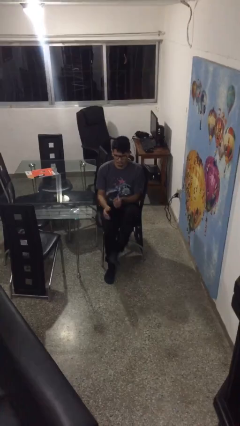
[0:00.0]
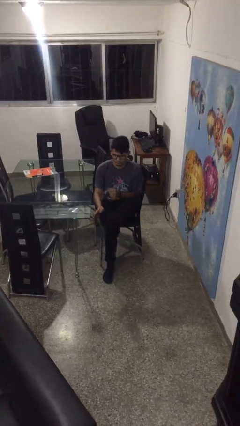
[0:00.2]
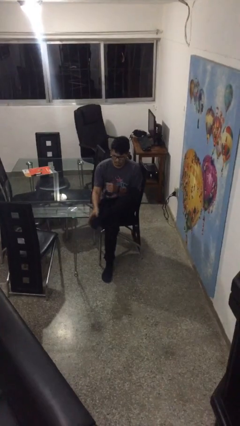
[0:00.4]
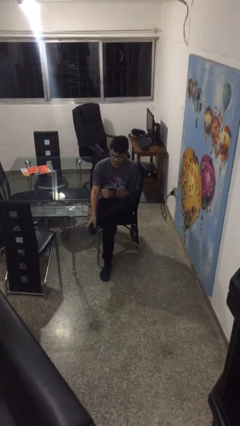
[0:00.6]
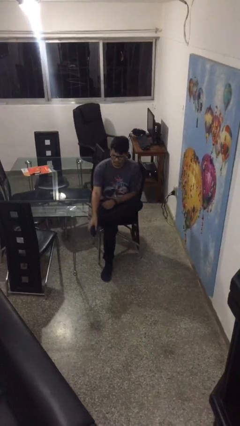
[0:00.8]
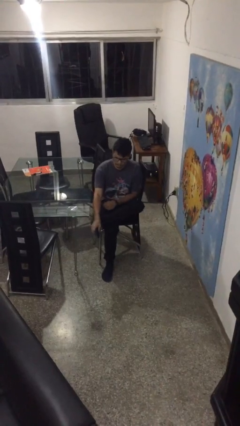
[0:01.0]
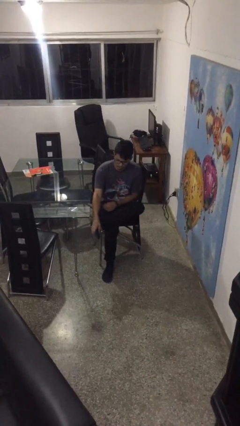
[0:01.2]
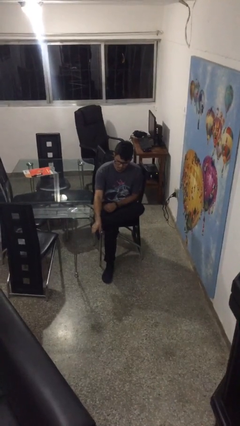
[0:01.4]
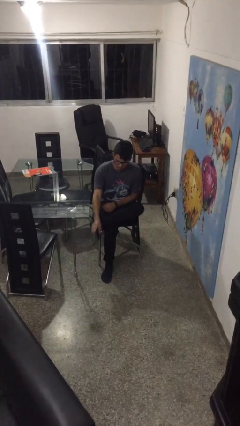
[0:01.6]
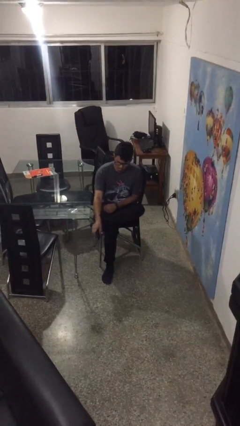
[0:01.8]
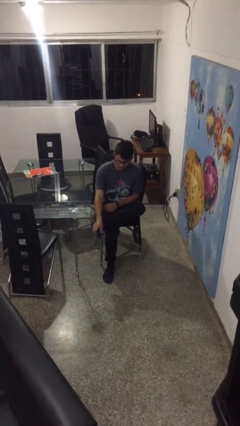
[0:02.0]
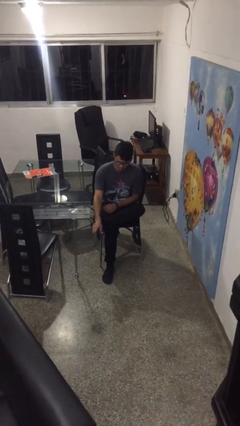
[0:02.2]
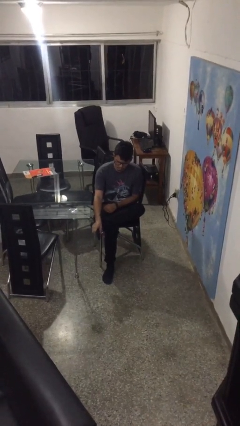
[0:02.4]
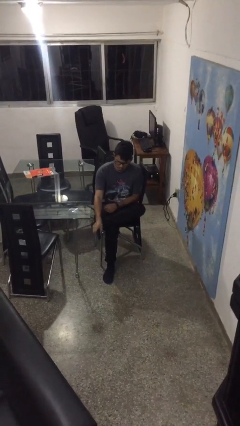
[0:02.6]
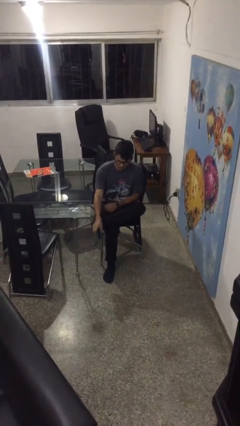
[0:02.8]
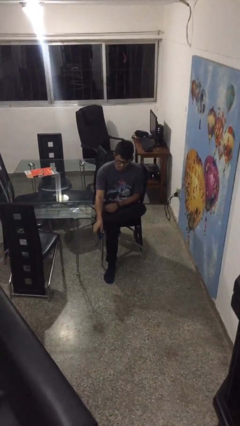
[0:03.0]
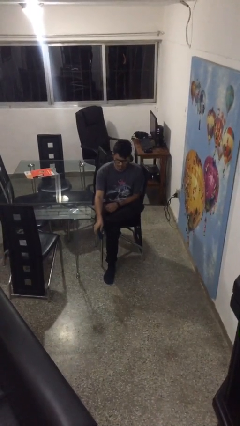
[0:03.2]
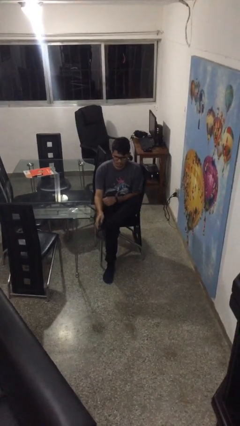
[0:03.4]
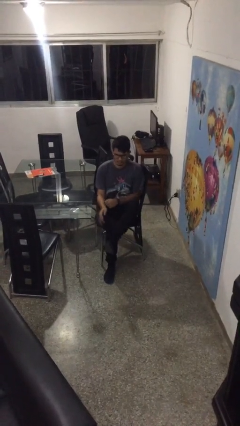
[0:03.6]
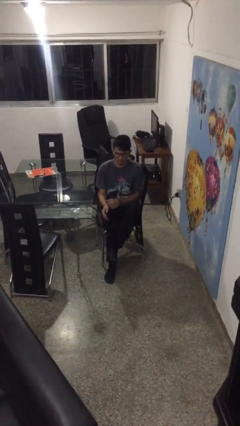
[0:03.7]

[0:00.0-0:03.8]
person rubs foot

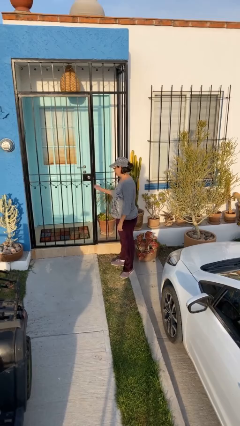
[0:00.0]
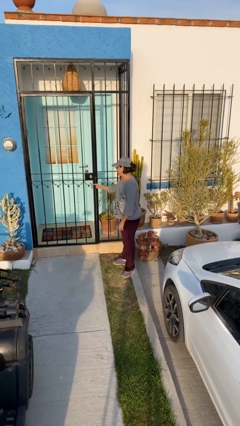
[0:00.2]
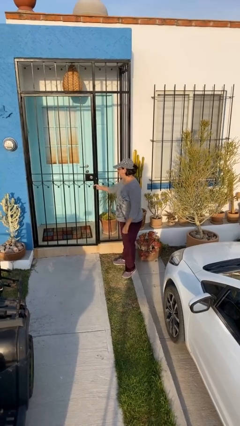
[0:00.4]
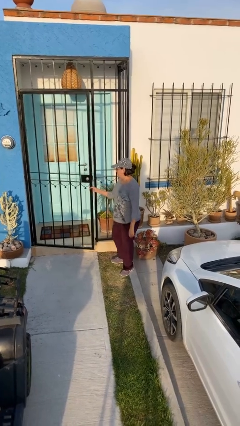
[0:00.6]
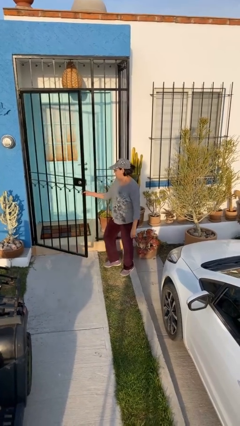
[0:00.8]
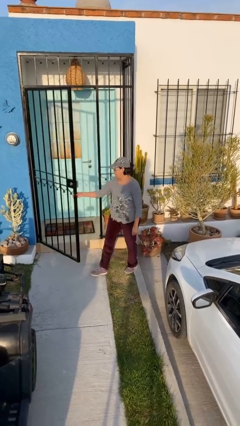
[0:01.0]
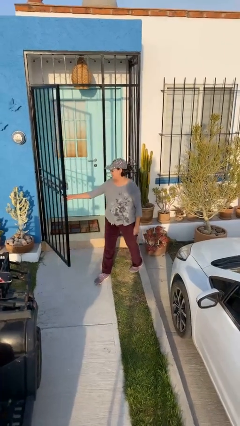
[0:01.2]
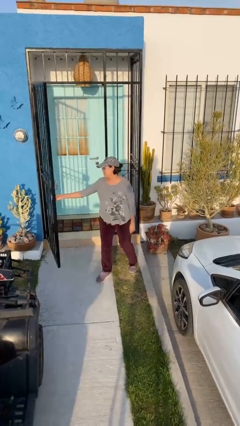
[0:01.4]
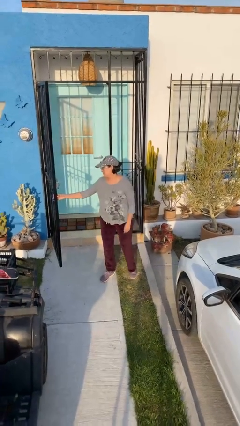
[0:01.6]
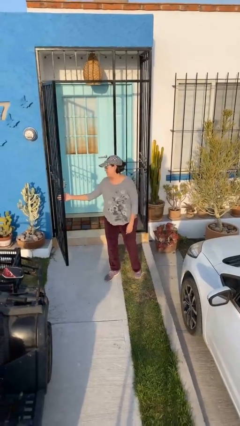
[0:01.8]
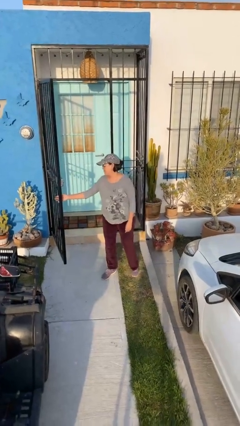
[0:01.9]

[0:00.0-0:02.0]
person opens facility door

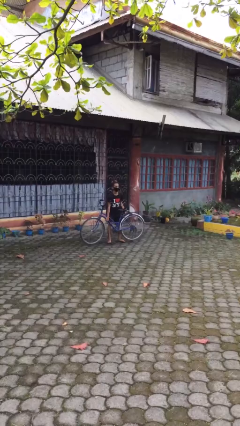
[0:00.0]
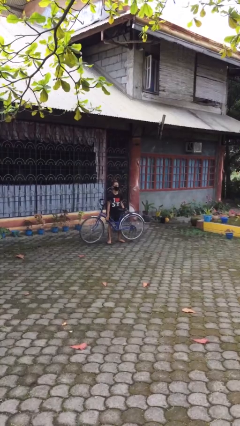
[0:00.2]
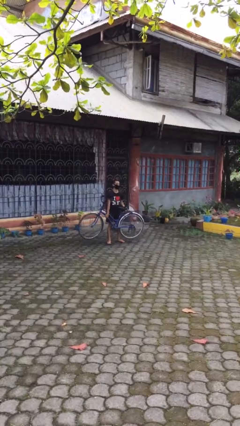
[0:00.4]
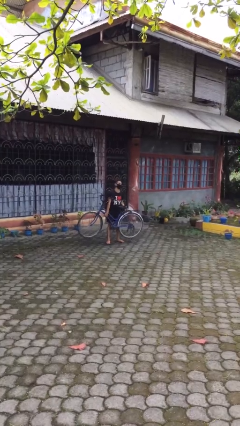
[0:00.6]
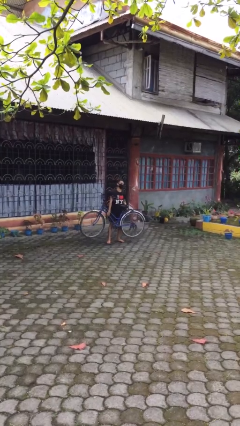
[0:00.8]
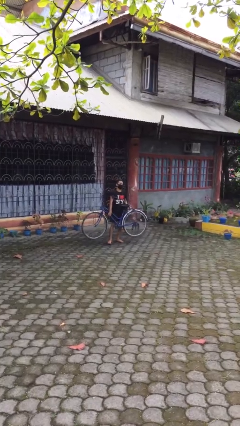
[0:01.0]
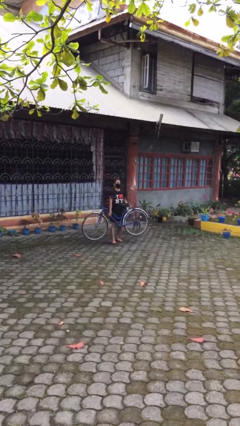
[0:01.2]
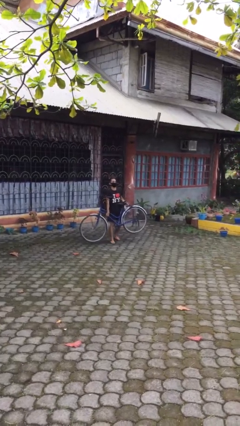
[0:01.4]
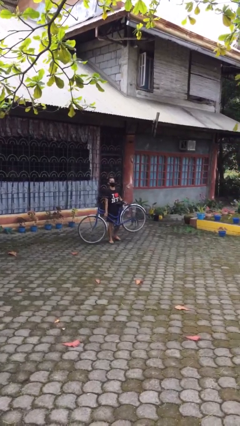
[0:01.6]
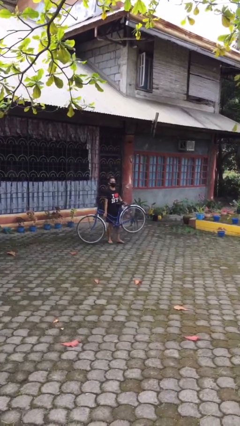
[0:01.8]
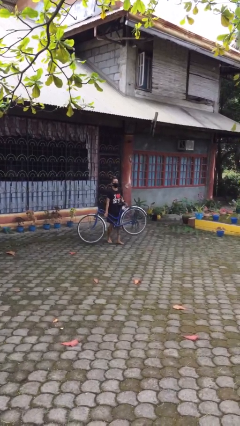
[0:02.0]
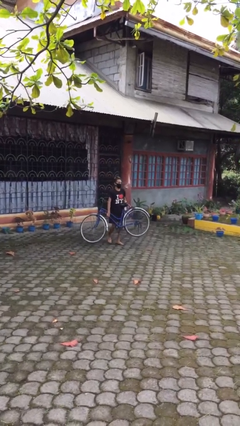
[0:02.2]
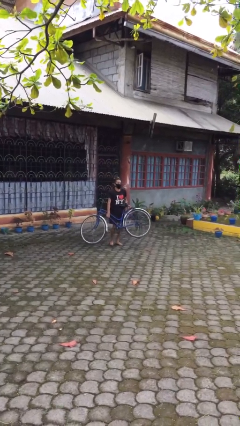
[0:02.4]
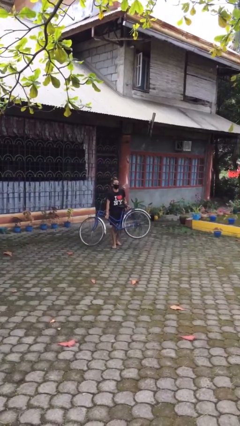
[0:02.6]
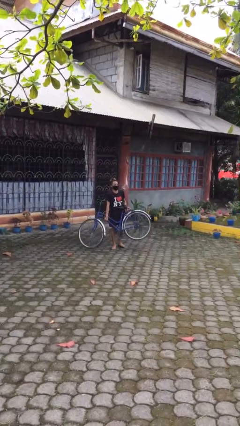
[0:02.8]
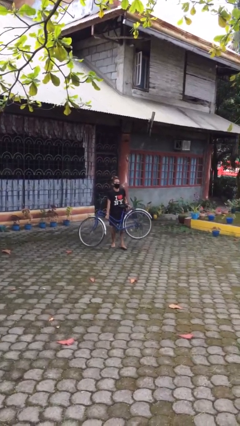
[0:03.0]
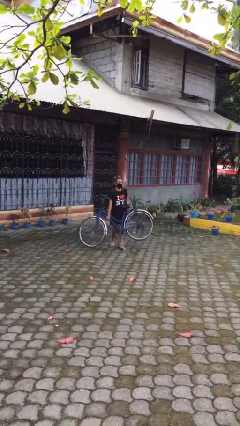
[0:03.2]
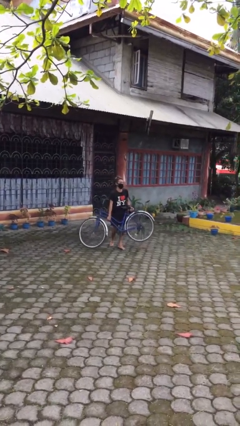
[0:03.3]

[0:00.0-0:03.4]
person carries heavy object

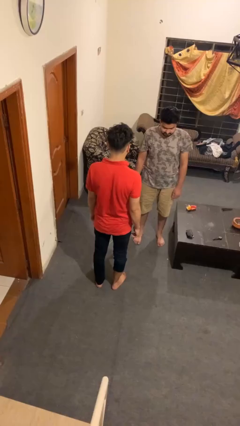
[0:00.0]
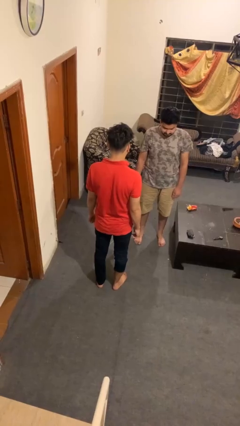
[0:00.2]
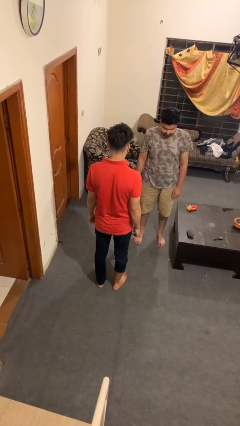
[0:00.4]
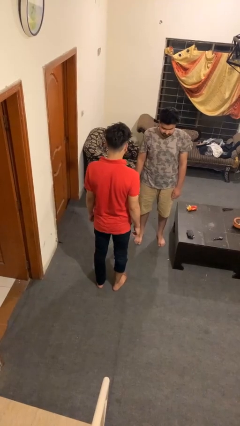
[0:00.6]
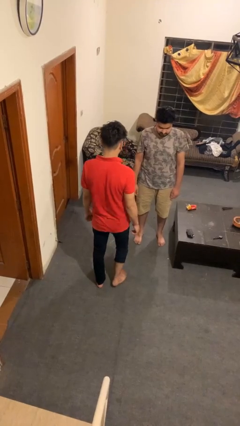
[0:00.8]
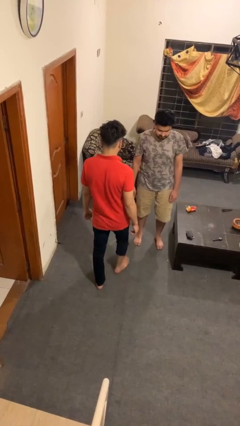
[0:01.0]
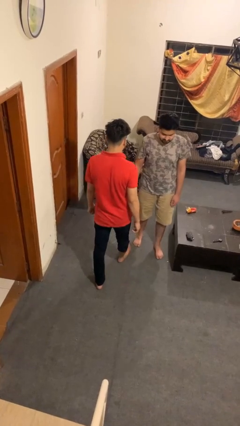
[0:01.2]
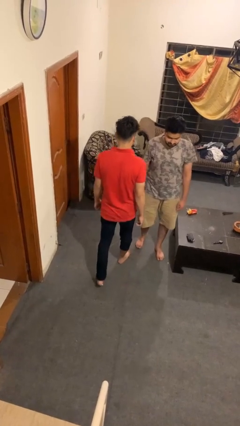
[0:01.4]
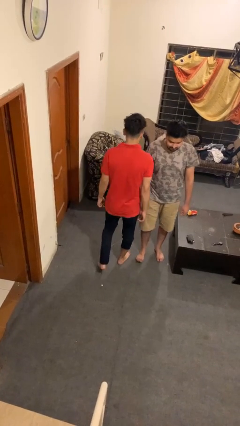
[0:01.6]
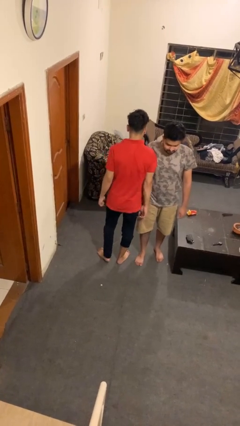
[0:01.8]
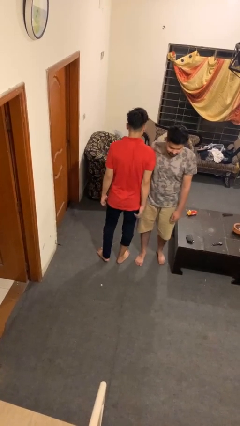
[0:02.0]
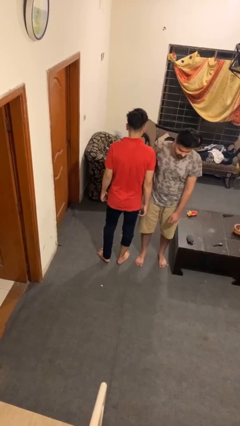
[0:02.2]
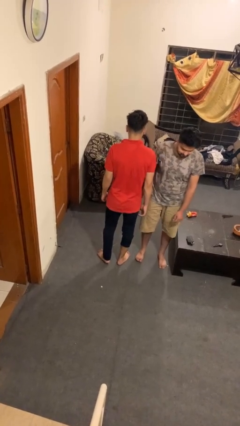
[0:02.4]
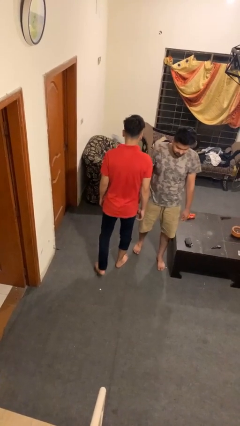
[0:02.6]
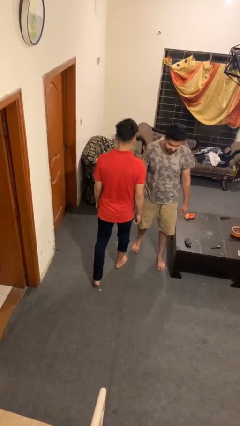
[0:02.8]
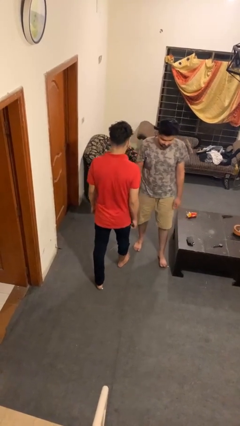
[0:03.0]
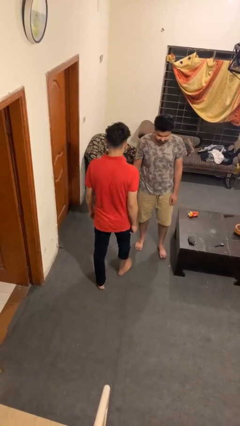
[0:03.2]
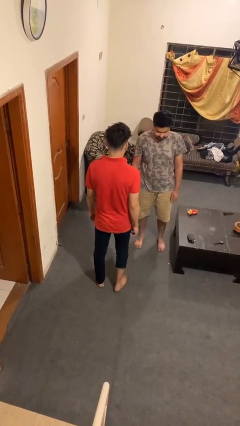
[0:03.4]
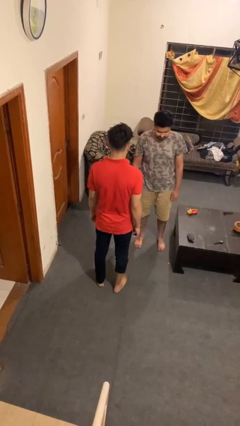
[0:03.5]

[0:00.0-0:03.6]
person bumps into person

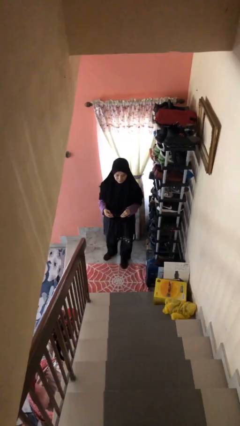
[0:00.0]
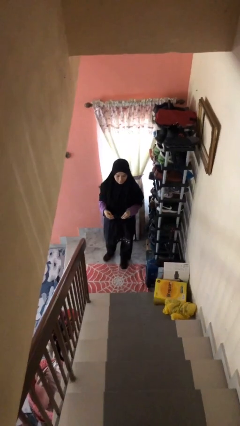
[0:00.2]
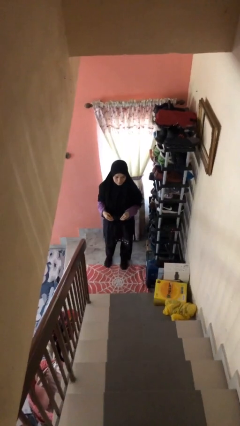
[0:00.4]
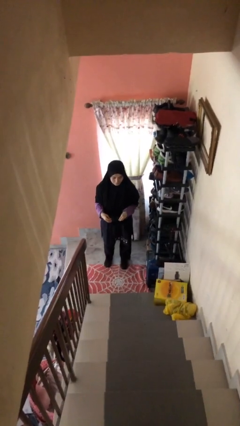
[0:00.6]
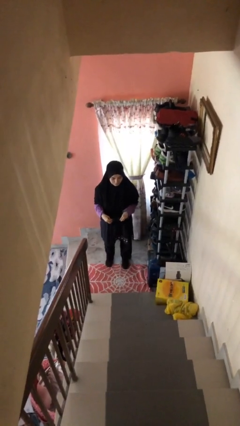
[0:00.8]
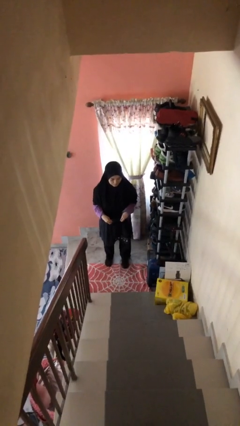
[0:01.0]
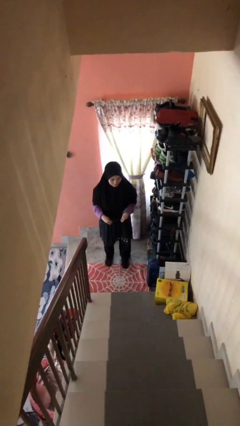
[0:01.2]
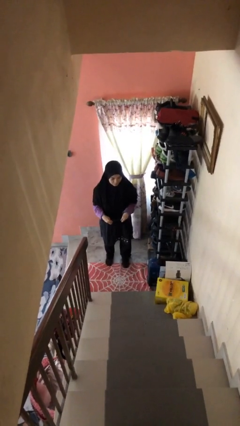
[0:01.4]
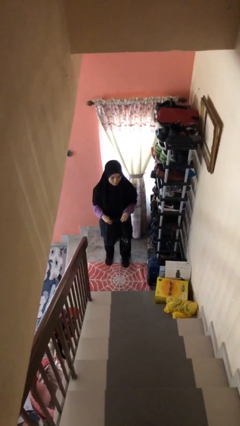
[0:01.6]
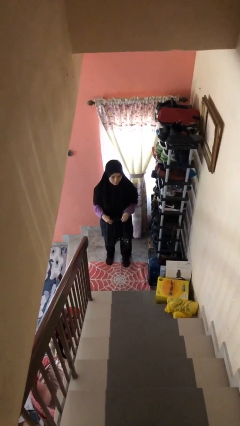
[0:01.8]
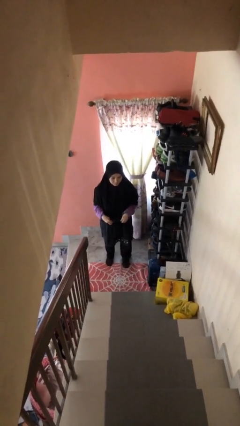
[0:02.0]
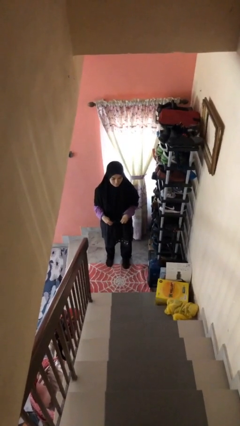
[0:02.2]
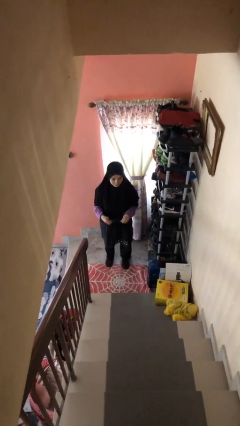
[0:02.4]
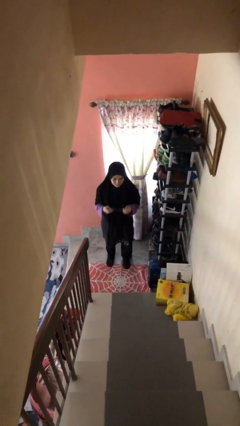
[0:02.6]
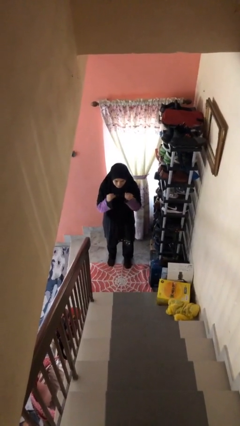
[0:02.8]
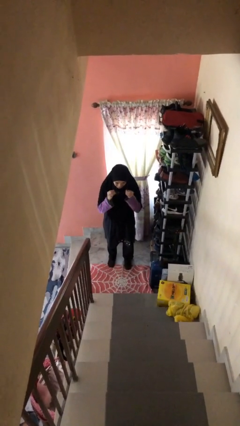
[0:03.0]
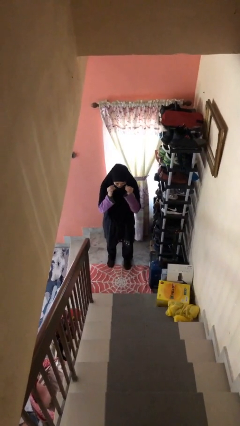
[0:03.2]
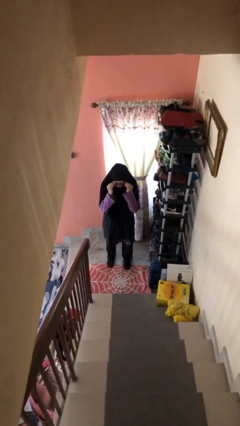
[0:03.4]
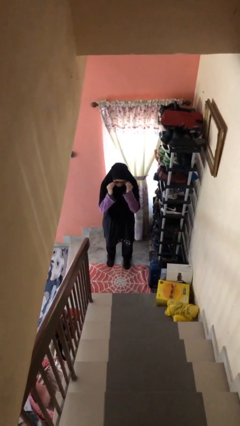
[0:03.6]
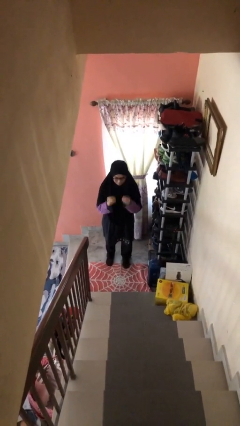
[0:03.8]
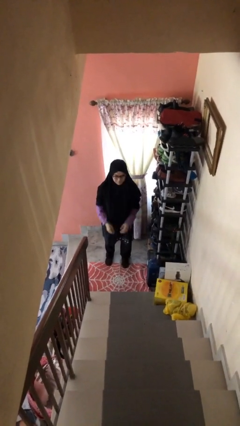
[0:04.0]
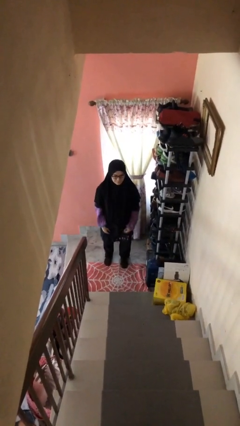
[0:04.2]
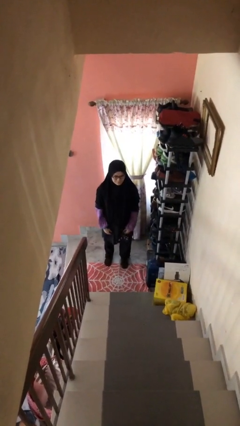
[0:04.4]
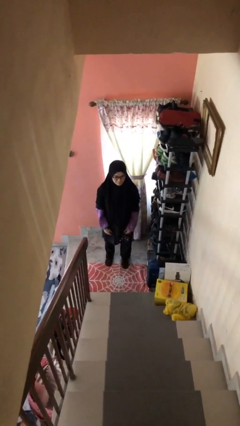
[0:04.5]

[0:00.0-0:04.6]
person puts on glasses
